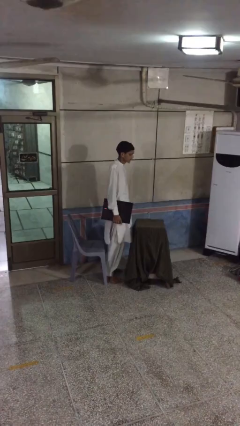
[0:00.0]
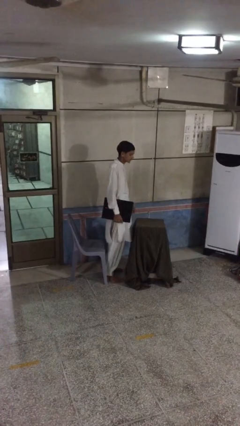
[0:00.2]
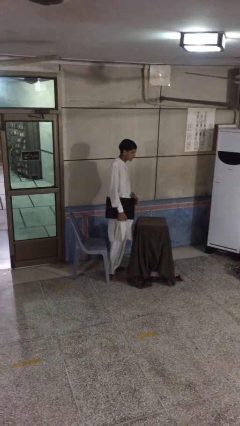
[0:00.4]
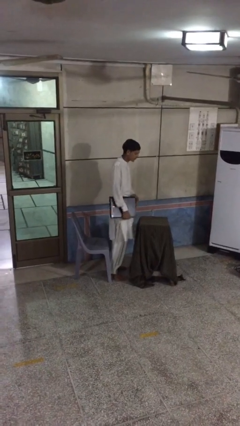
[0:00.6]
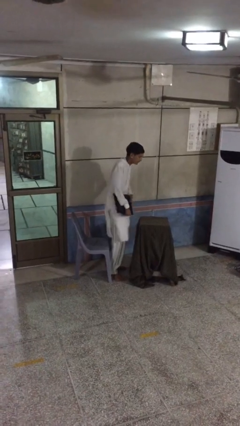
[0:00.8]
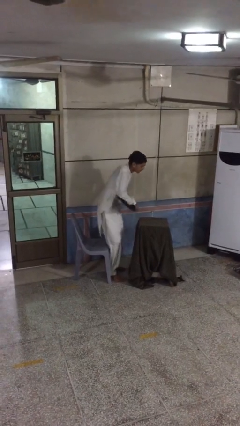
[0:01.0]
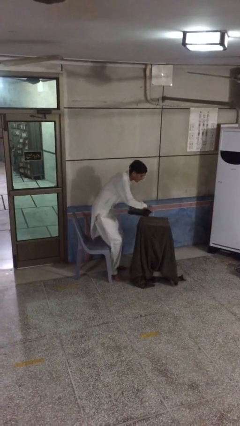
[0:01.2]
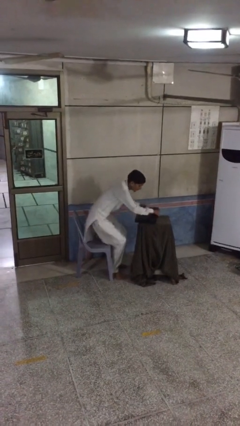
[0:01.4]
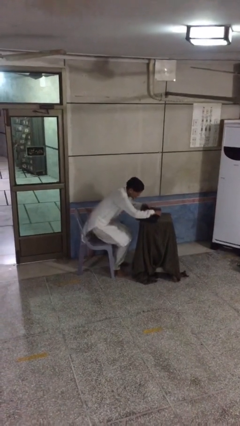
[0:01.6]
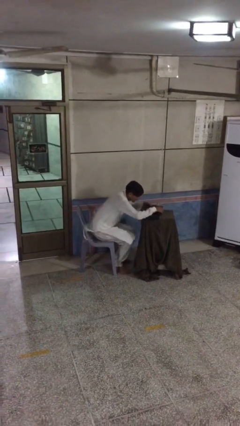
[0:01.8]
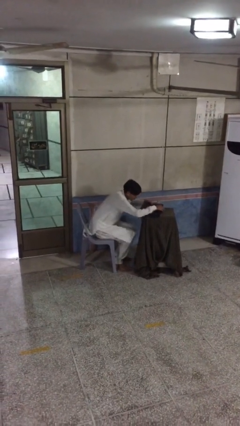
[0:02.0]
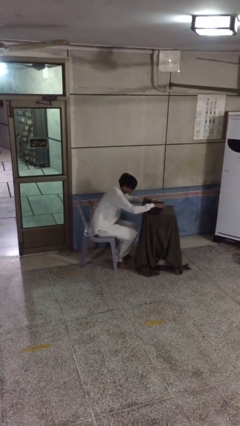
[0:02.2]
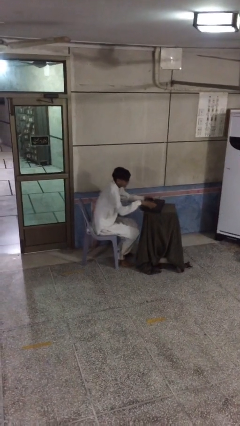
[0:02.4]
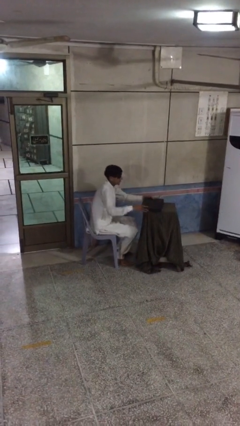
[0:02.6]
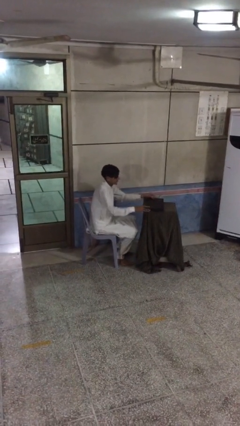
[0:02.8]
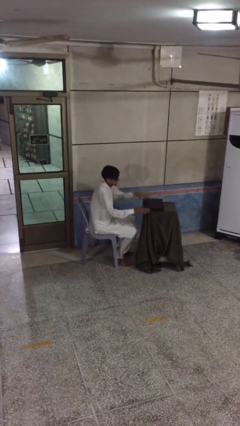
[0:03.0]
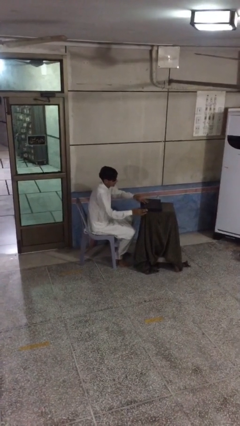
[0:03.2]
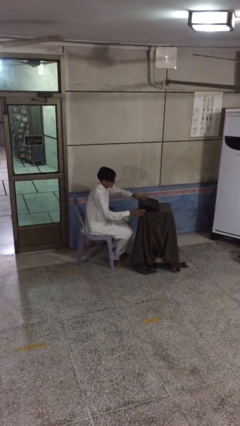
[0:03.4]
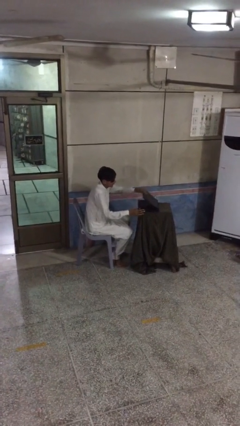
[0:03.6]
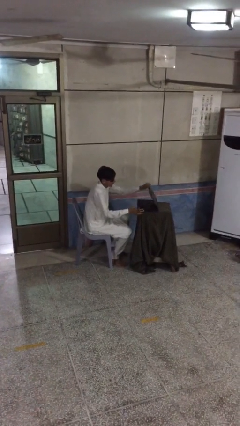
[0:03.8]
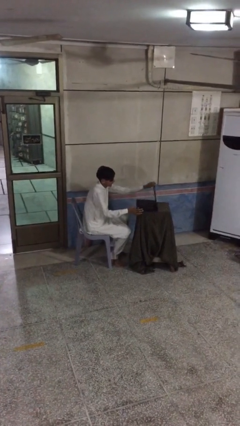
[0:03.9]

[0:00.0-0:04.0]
person sits down

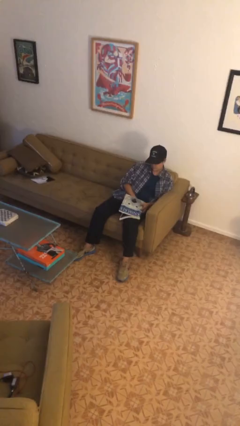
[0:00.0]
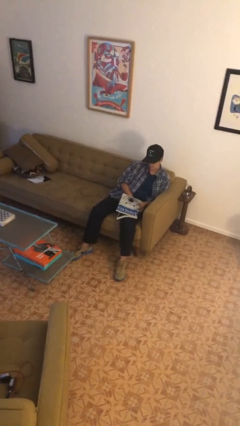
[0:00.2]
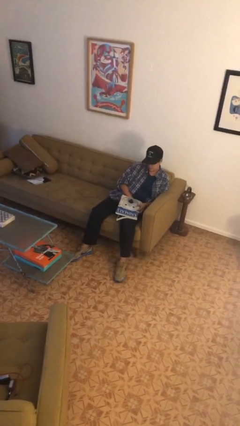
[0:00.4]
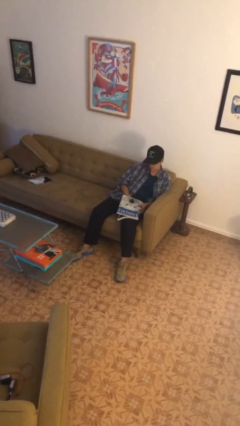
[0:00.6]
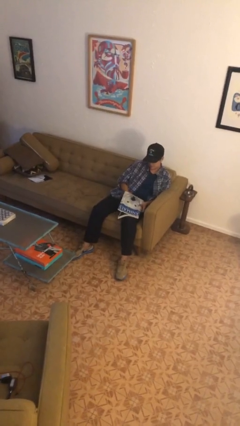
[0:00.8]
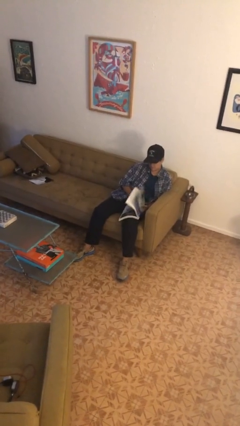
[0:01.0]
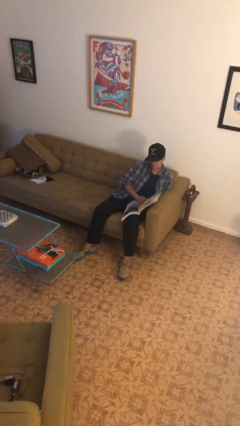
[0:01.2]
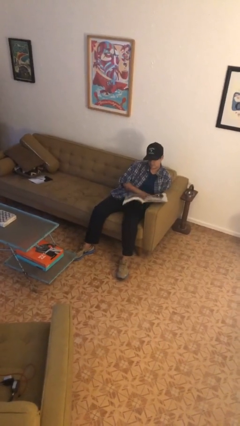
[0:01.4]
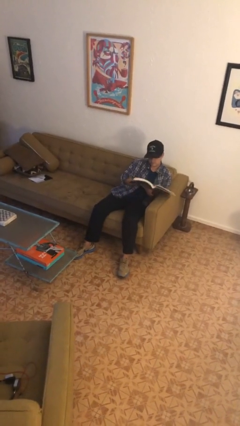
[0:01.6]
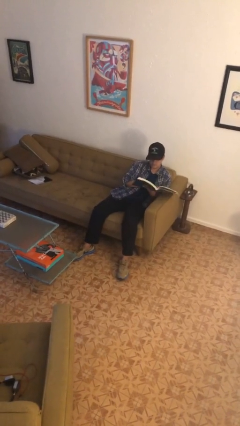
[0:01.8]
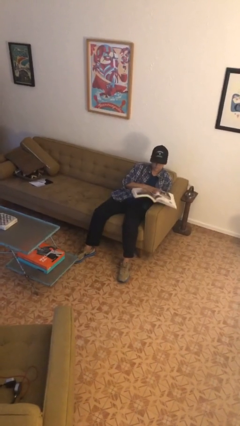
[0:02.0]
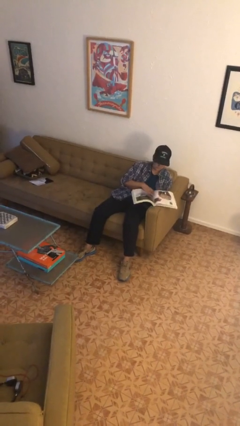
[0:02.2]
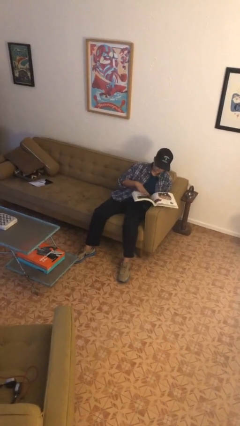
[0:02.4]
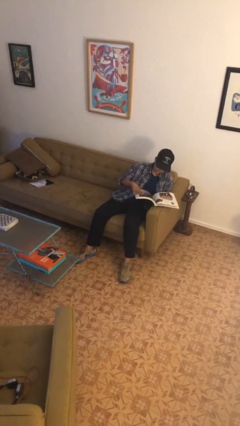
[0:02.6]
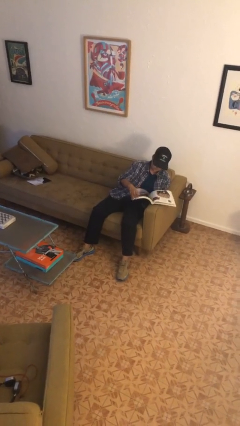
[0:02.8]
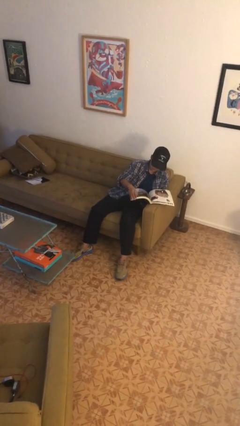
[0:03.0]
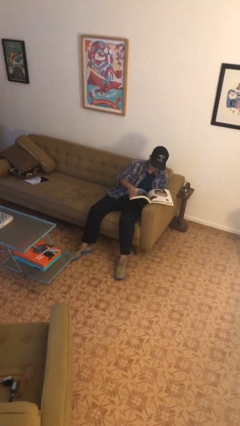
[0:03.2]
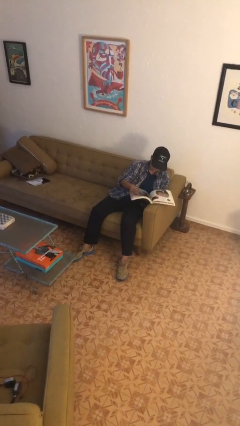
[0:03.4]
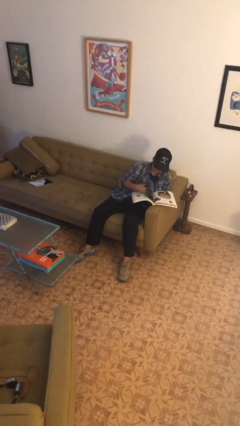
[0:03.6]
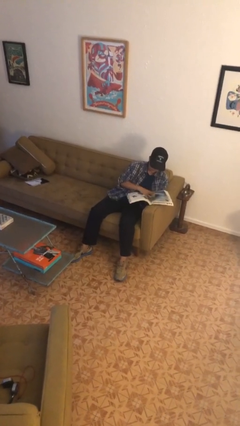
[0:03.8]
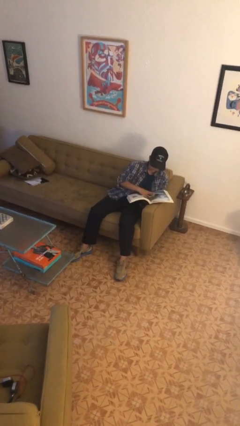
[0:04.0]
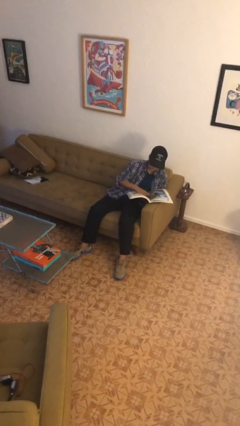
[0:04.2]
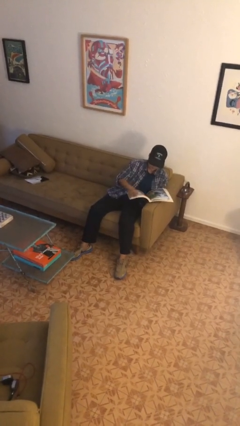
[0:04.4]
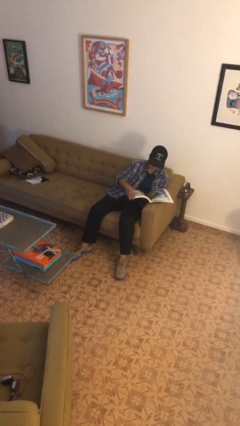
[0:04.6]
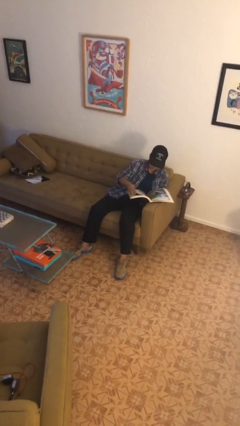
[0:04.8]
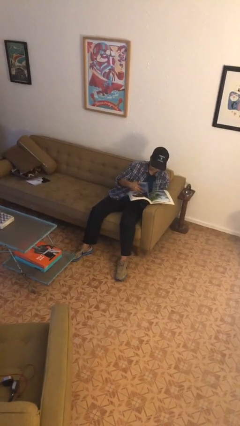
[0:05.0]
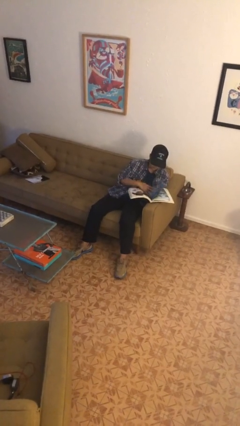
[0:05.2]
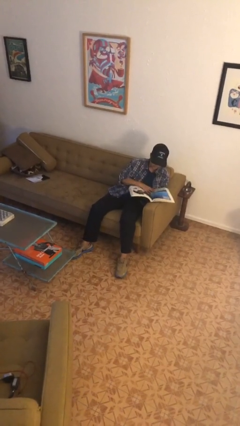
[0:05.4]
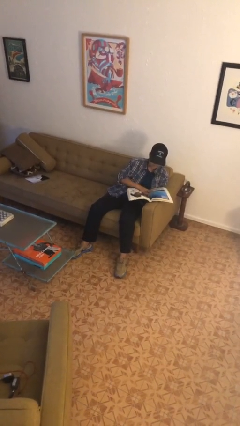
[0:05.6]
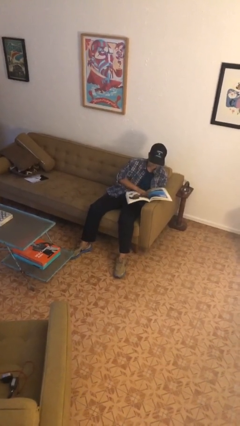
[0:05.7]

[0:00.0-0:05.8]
person reads book

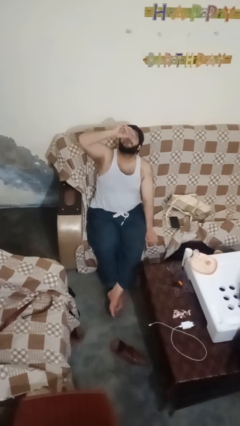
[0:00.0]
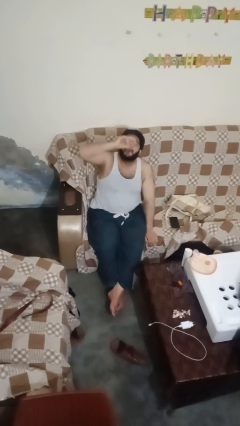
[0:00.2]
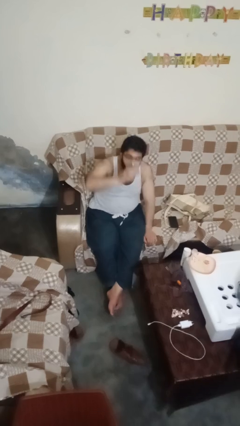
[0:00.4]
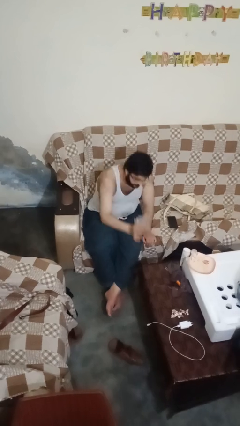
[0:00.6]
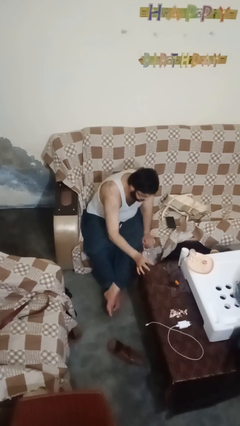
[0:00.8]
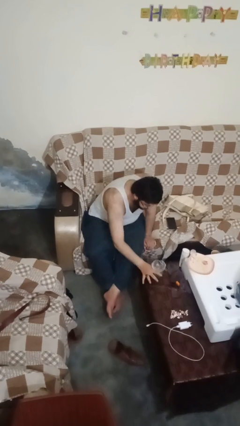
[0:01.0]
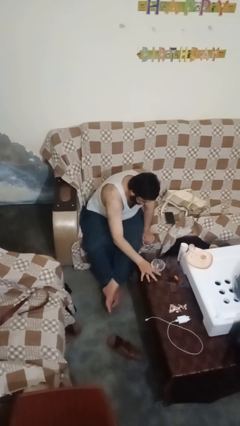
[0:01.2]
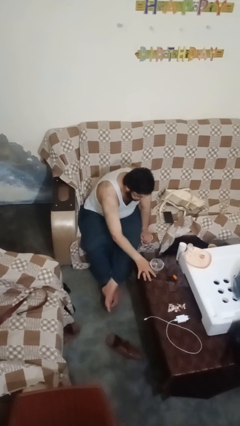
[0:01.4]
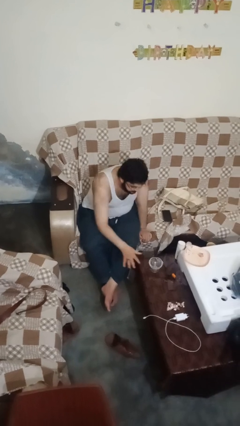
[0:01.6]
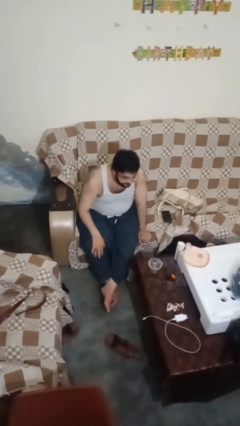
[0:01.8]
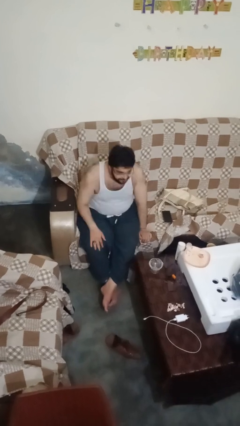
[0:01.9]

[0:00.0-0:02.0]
person puts down object on table

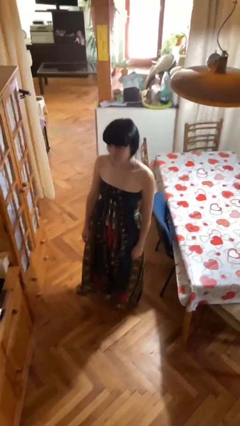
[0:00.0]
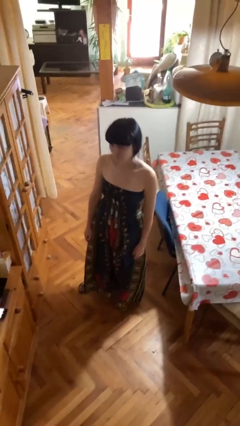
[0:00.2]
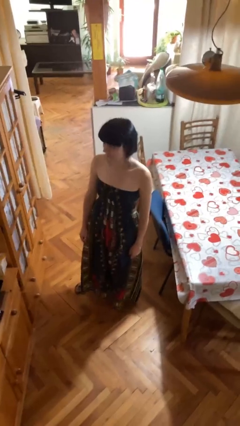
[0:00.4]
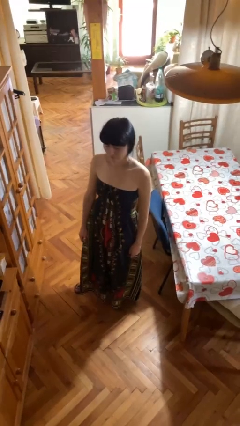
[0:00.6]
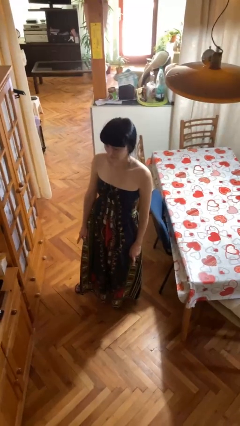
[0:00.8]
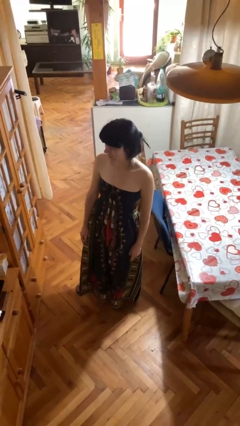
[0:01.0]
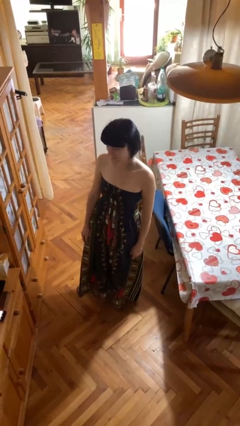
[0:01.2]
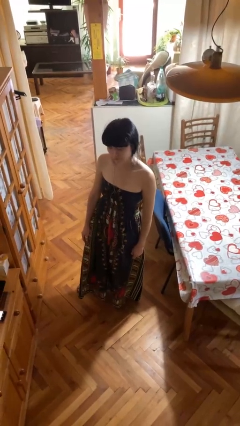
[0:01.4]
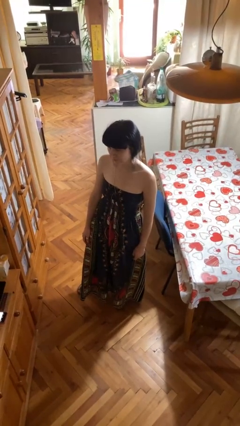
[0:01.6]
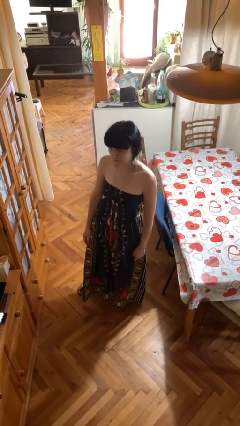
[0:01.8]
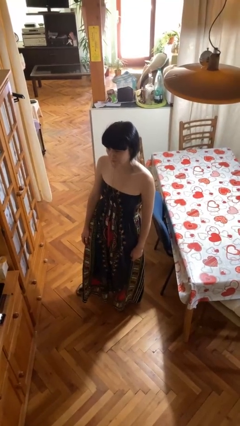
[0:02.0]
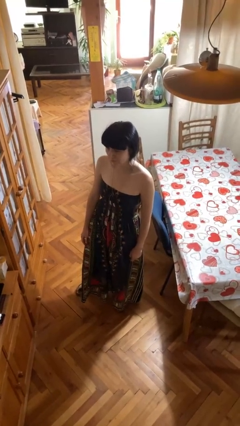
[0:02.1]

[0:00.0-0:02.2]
person shakes head

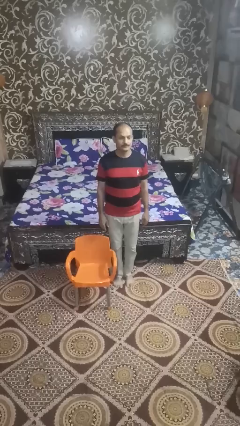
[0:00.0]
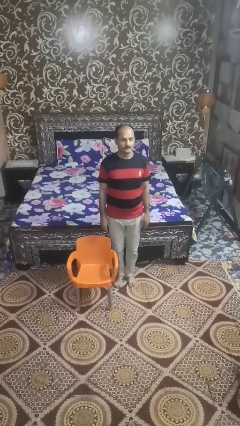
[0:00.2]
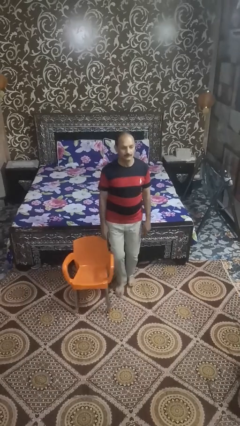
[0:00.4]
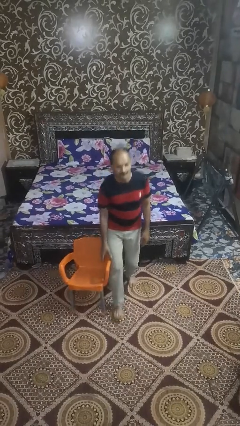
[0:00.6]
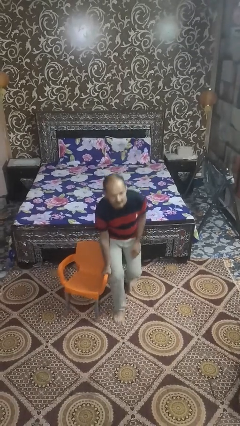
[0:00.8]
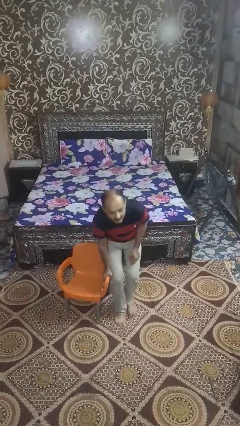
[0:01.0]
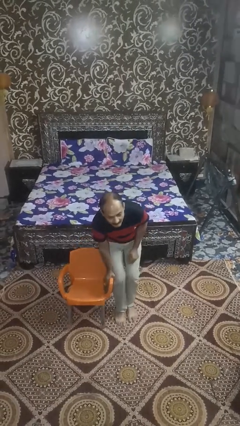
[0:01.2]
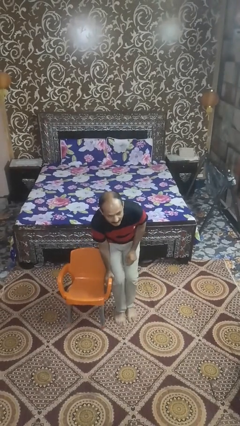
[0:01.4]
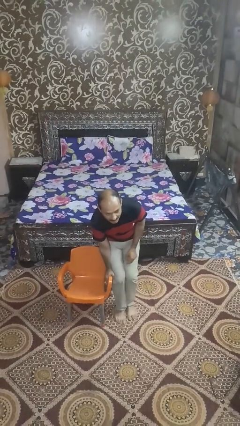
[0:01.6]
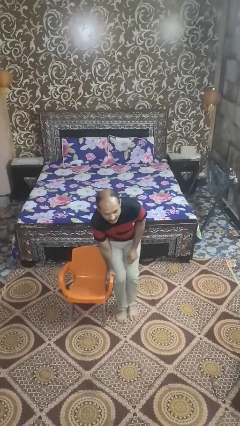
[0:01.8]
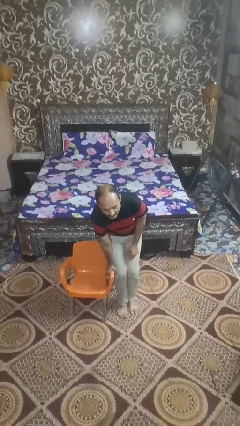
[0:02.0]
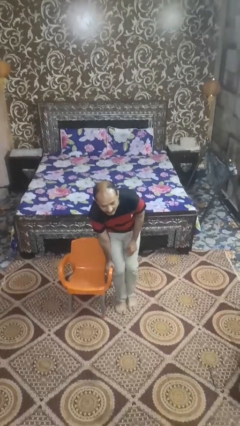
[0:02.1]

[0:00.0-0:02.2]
person trips on object on floor

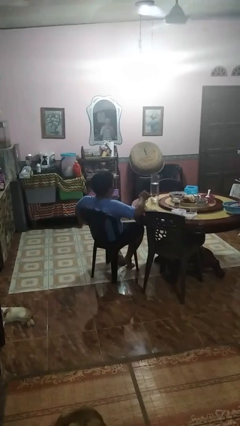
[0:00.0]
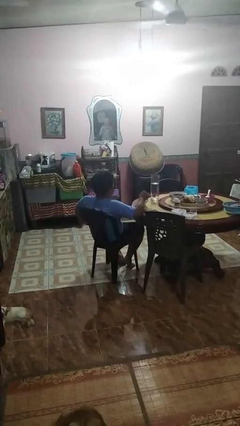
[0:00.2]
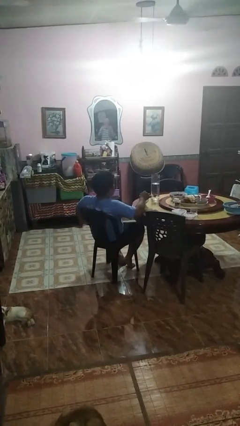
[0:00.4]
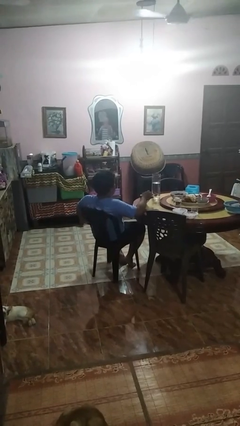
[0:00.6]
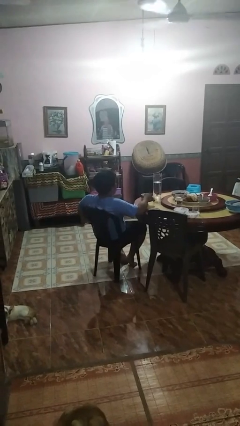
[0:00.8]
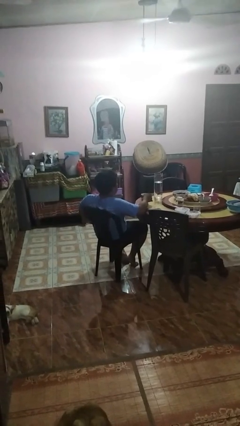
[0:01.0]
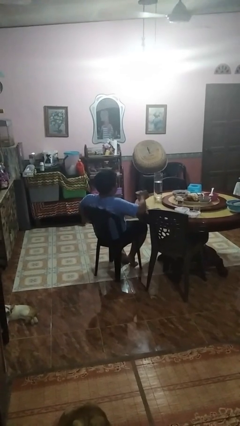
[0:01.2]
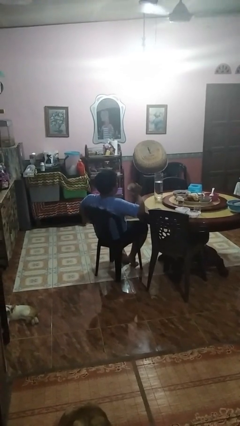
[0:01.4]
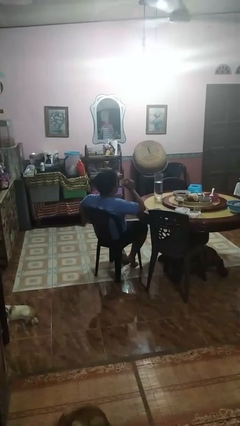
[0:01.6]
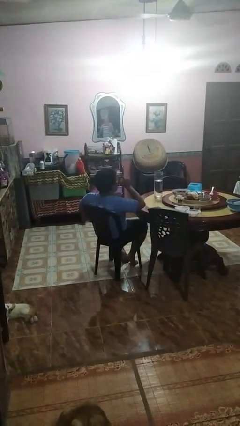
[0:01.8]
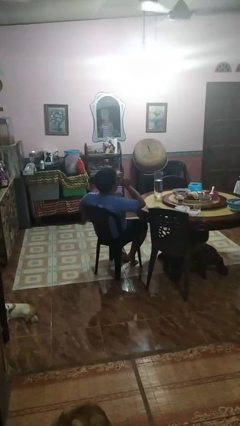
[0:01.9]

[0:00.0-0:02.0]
person stirs mug
